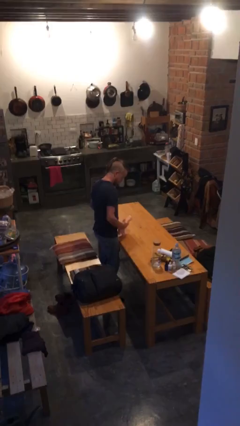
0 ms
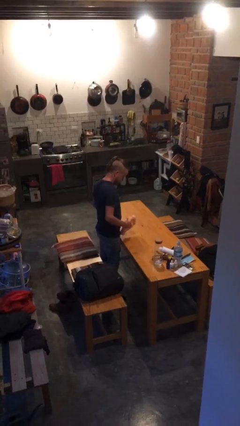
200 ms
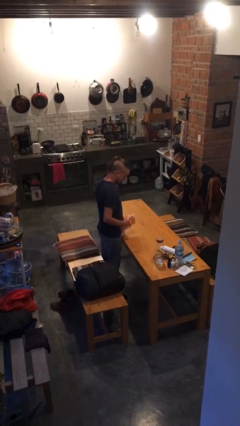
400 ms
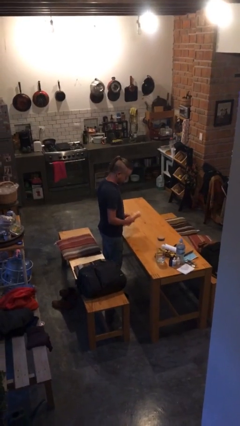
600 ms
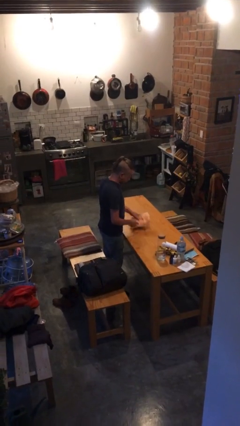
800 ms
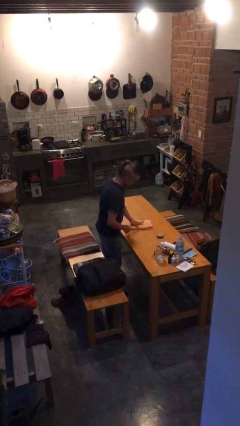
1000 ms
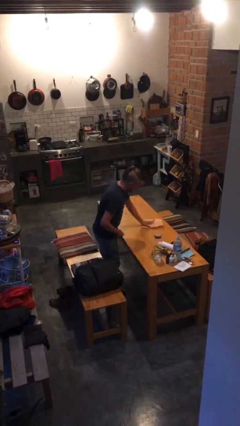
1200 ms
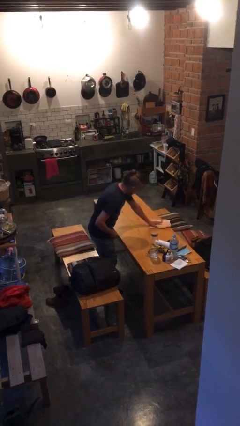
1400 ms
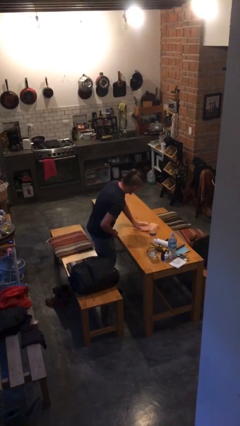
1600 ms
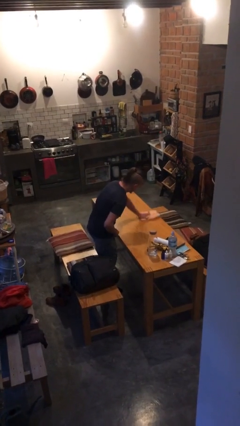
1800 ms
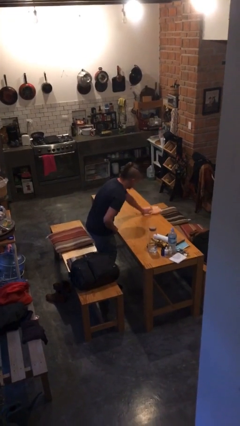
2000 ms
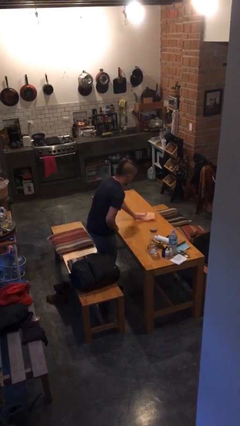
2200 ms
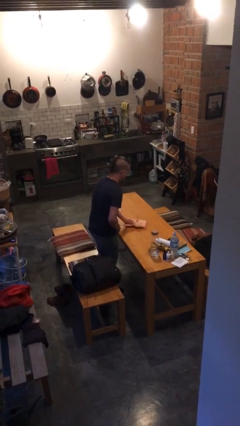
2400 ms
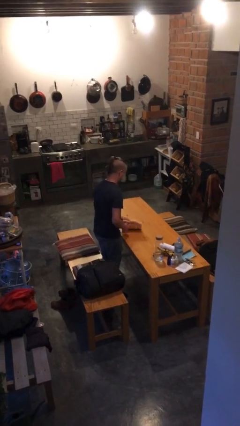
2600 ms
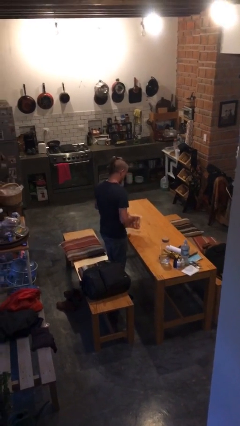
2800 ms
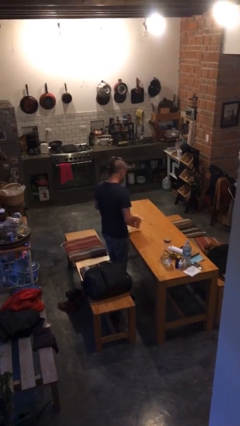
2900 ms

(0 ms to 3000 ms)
person cleans table with rag

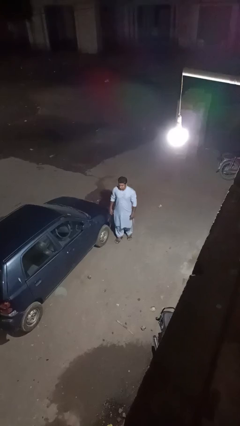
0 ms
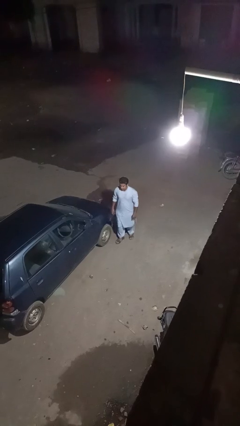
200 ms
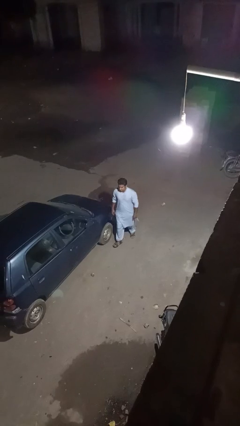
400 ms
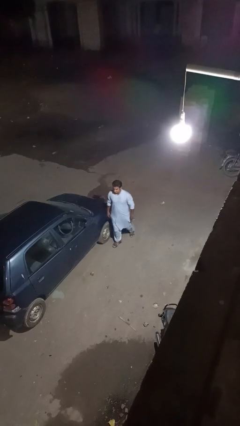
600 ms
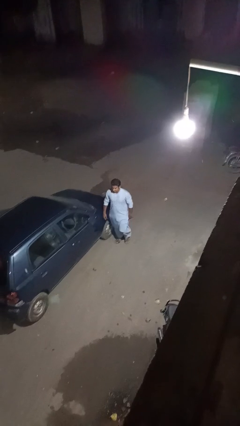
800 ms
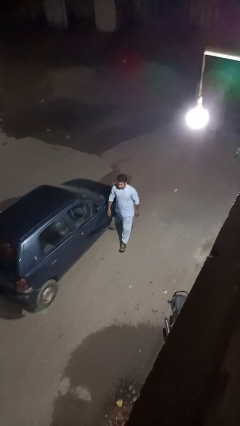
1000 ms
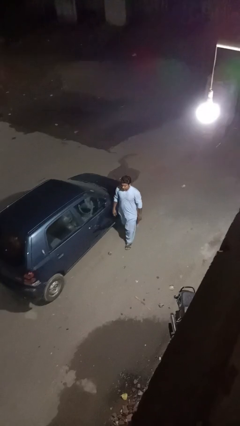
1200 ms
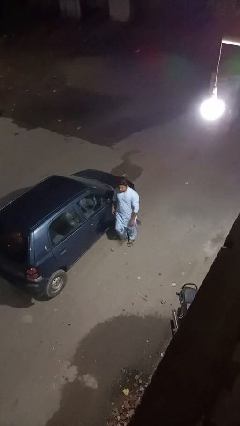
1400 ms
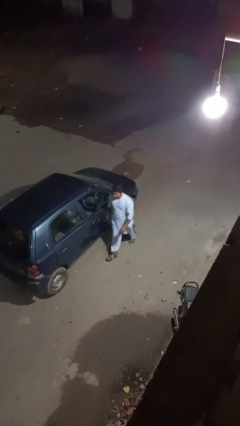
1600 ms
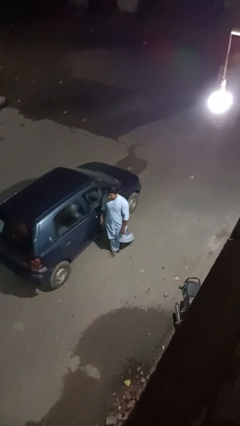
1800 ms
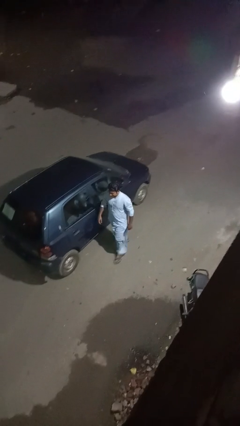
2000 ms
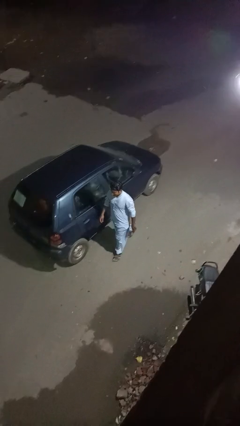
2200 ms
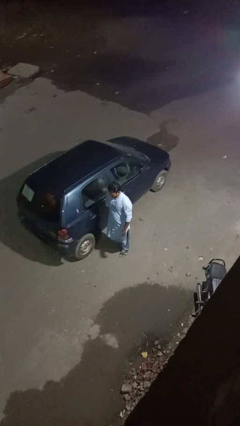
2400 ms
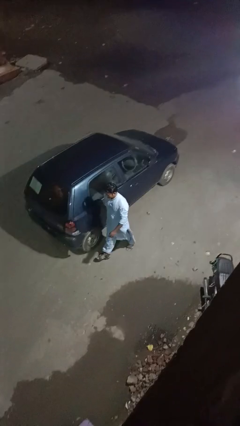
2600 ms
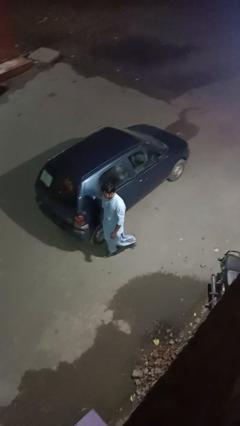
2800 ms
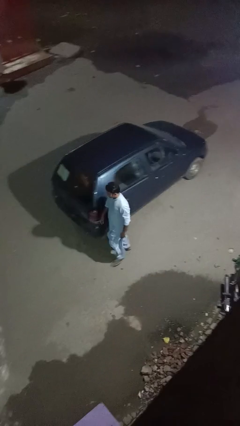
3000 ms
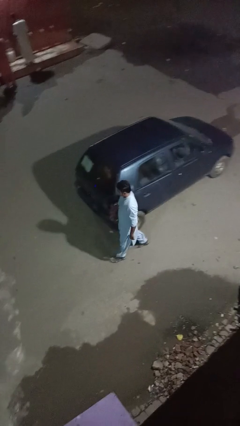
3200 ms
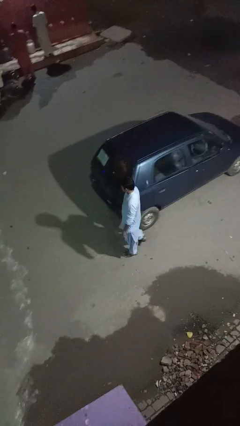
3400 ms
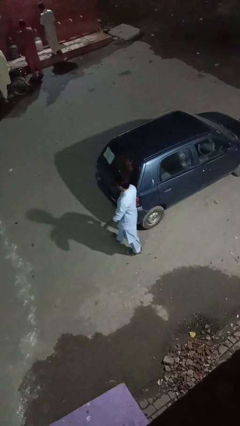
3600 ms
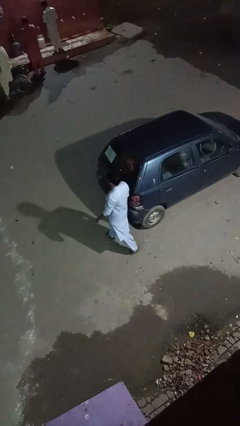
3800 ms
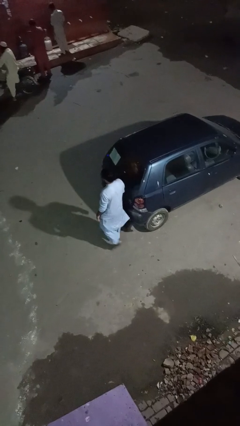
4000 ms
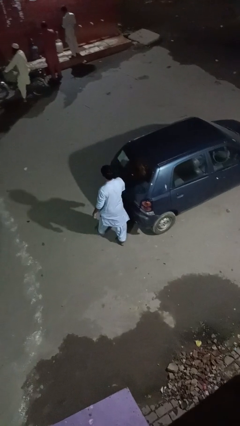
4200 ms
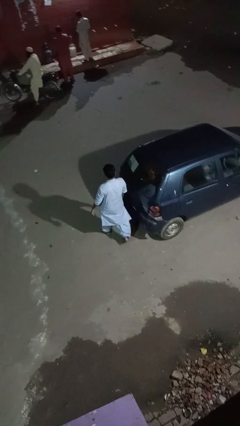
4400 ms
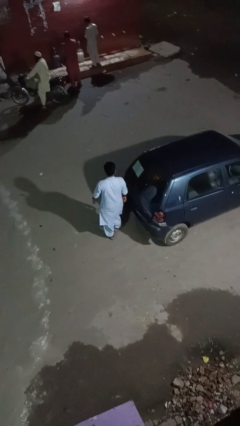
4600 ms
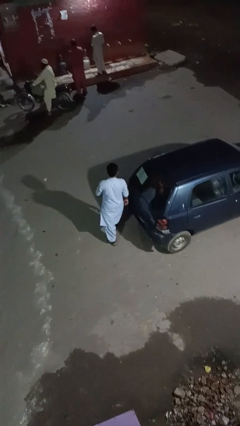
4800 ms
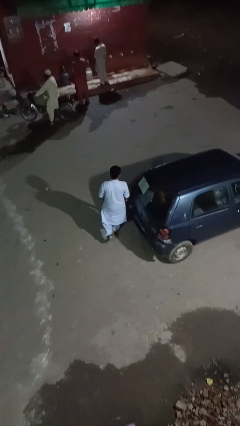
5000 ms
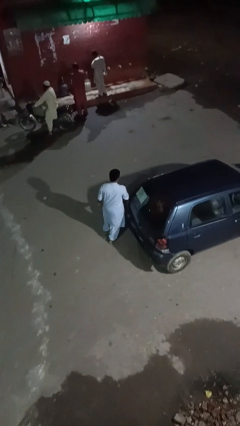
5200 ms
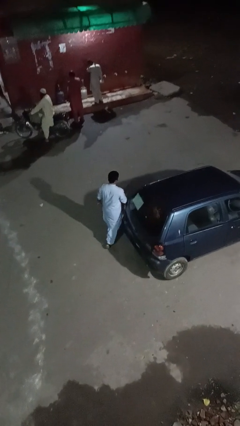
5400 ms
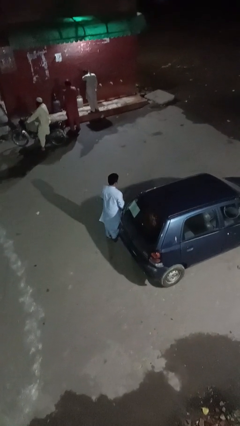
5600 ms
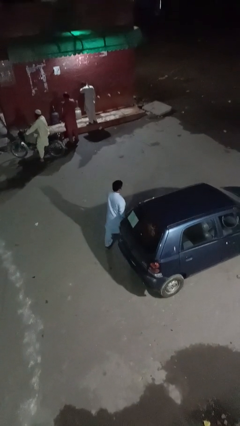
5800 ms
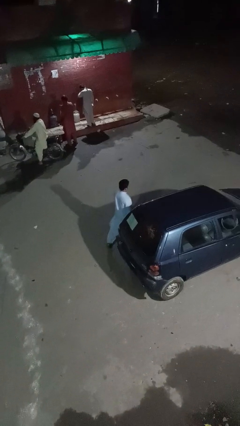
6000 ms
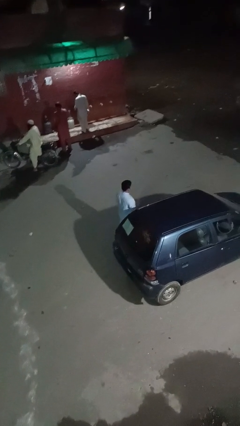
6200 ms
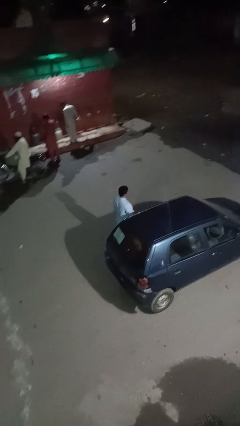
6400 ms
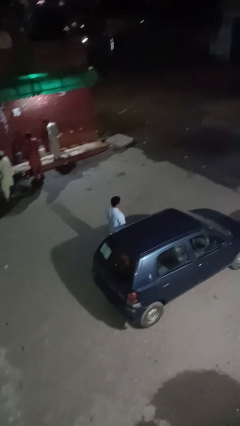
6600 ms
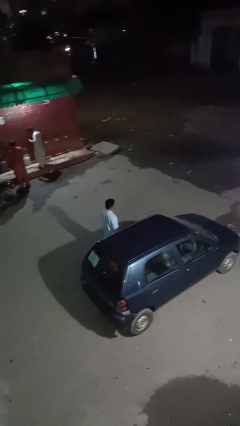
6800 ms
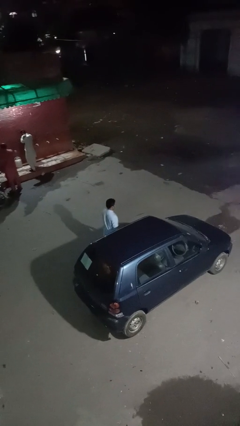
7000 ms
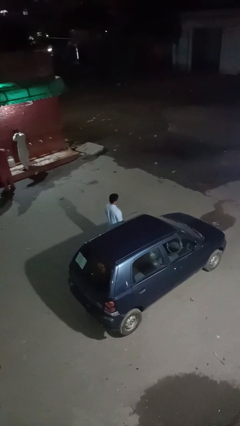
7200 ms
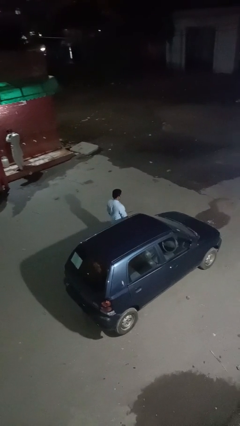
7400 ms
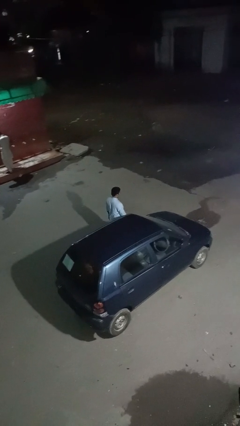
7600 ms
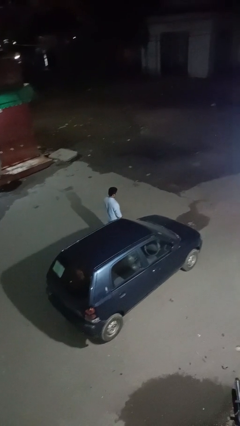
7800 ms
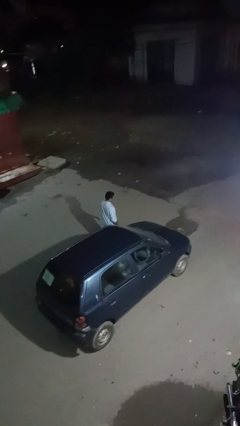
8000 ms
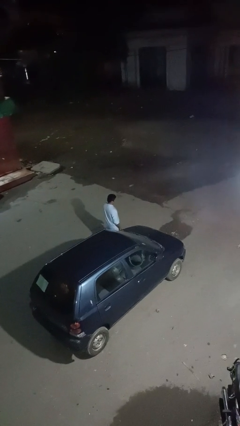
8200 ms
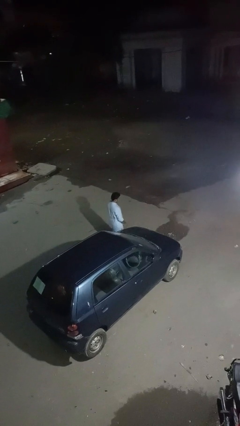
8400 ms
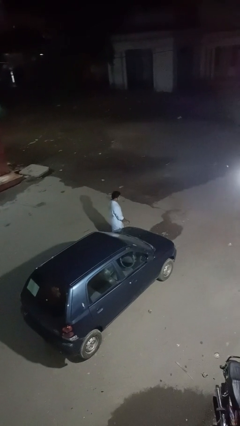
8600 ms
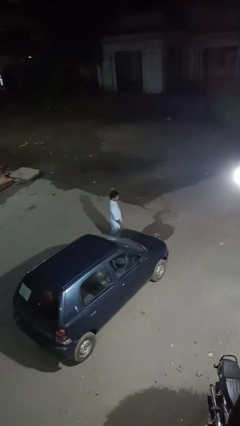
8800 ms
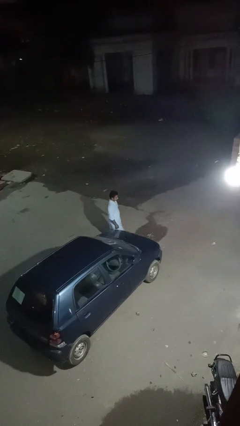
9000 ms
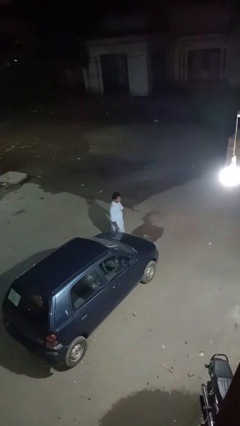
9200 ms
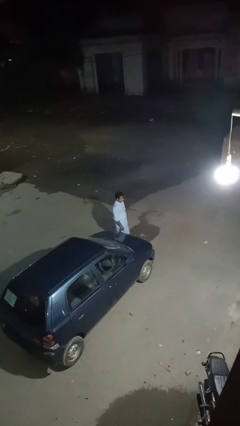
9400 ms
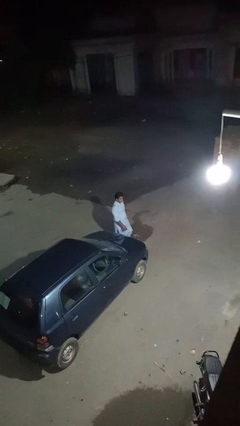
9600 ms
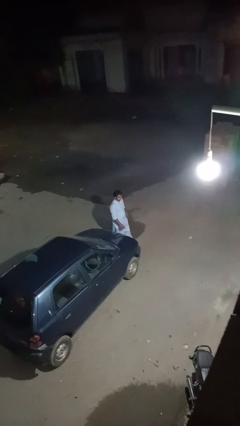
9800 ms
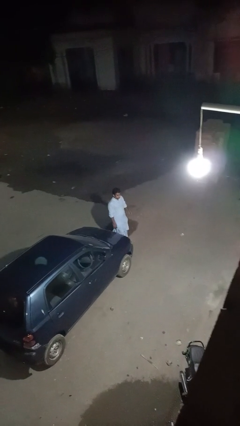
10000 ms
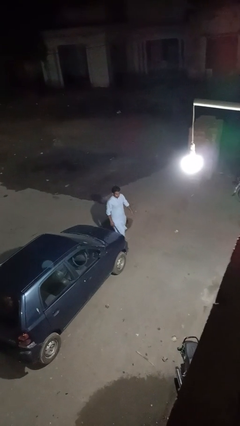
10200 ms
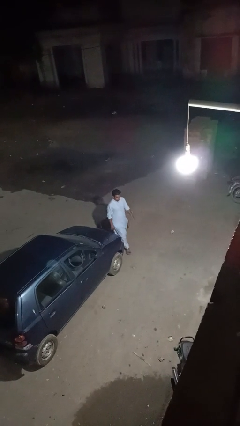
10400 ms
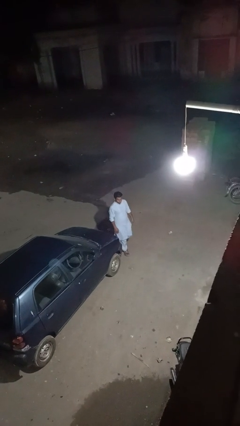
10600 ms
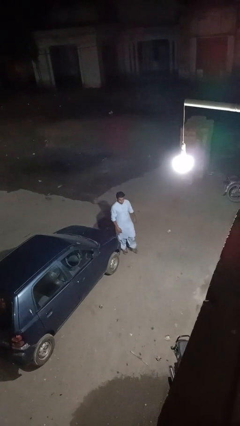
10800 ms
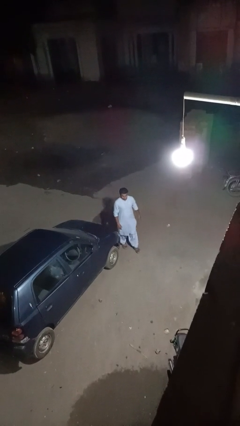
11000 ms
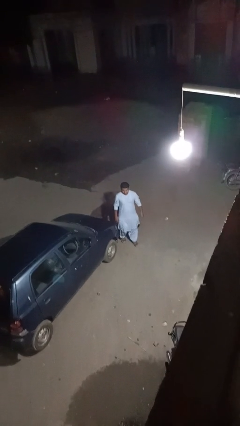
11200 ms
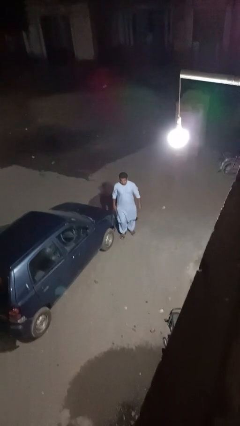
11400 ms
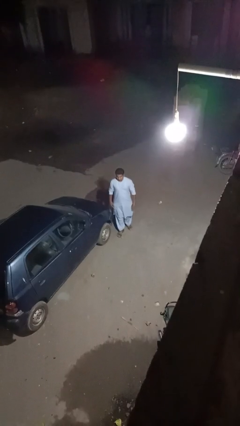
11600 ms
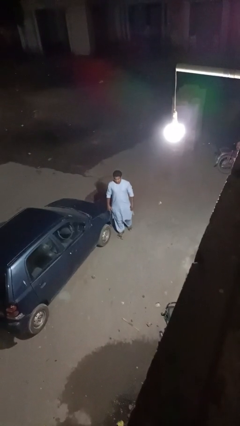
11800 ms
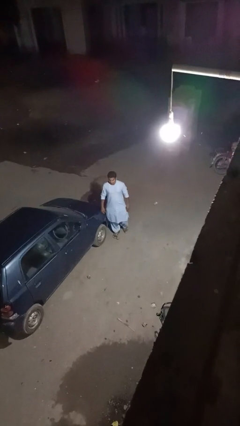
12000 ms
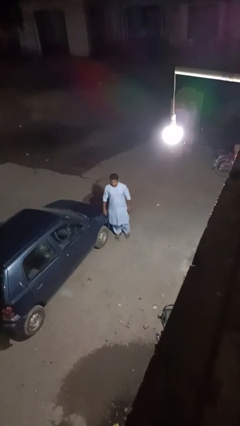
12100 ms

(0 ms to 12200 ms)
person walks around car

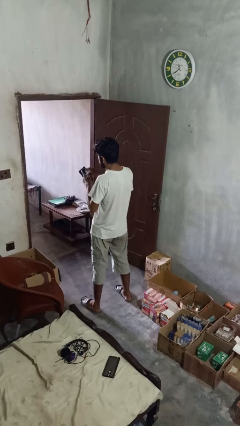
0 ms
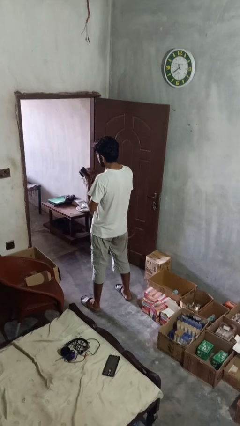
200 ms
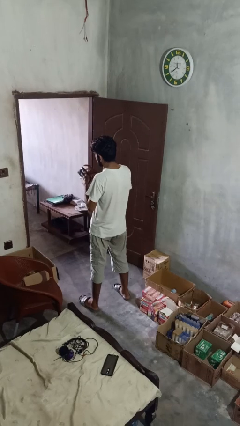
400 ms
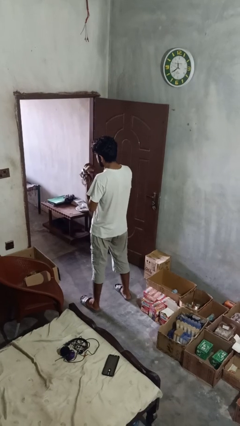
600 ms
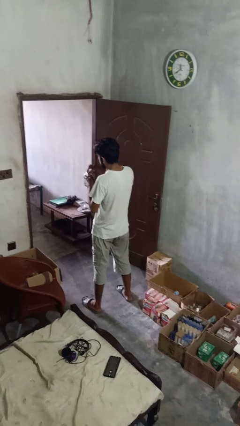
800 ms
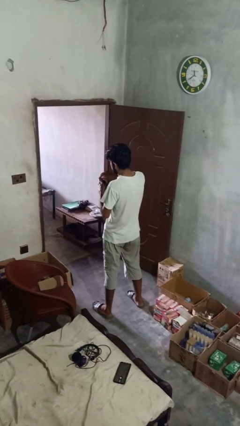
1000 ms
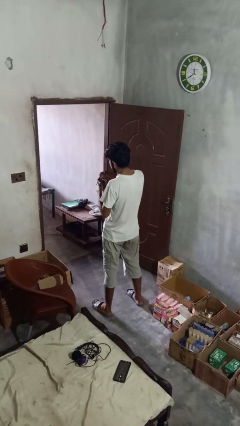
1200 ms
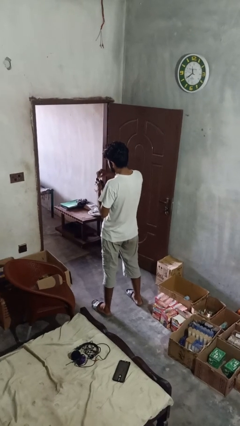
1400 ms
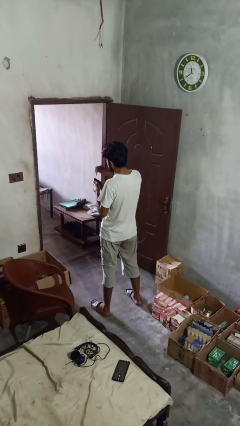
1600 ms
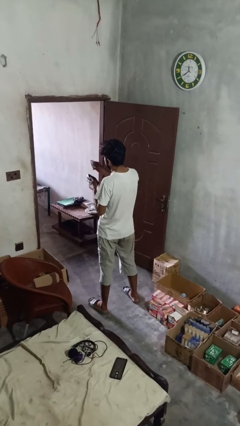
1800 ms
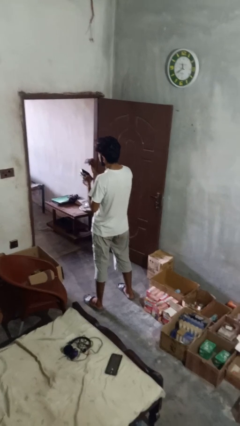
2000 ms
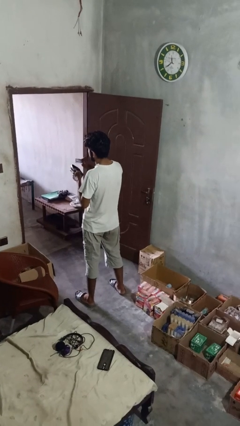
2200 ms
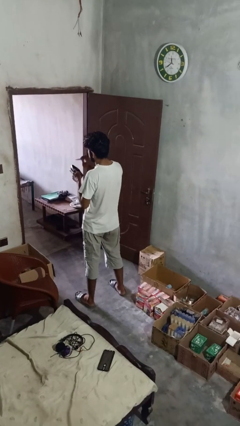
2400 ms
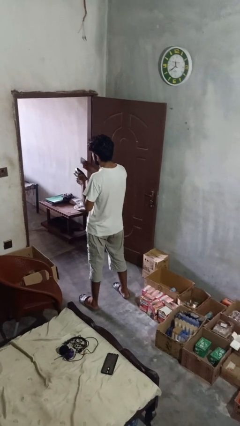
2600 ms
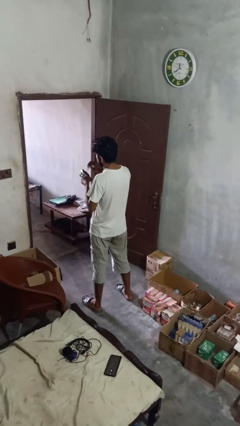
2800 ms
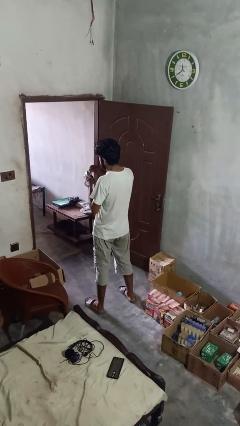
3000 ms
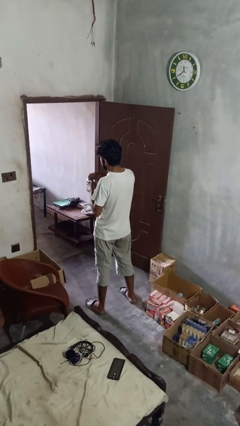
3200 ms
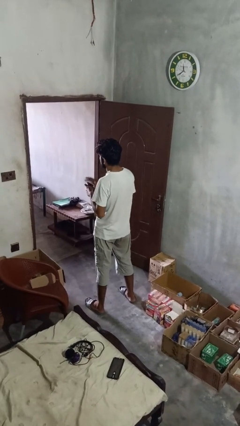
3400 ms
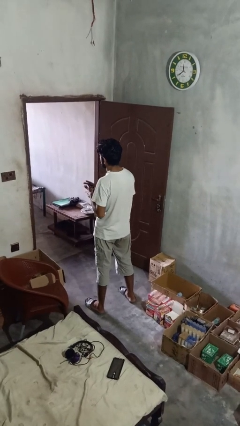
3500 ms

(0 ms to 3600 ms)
person takes object from purse
